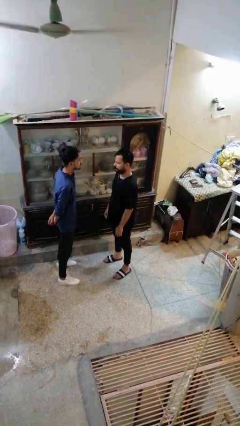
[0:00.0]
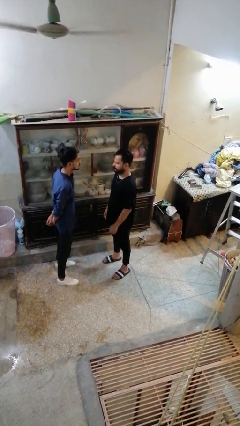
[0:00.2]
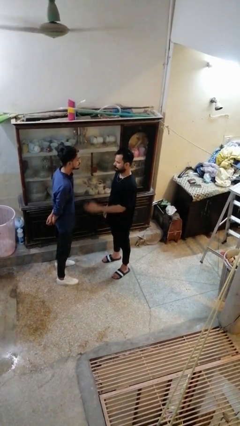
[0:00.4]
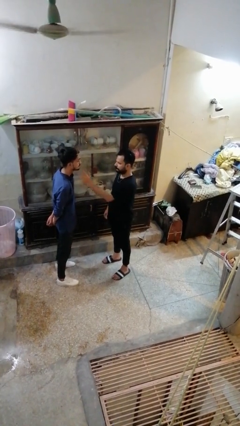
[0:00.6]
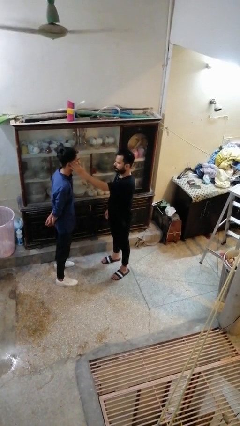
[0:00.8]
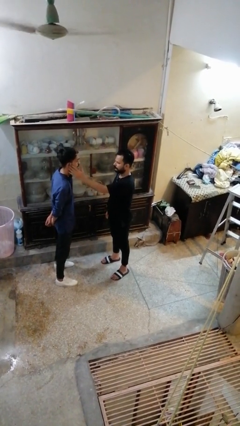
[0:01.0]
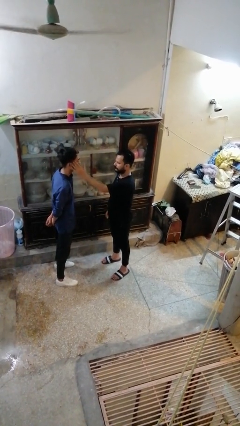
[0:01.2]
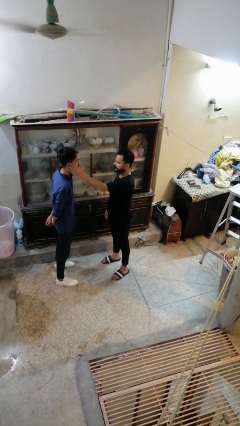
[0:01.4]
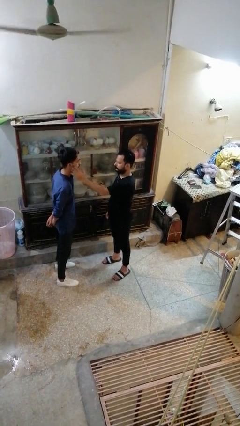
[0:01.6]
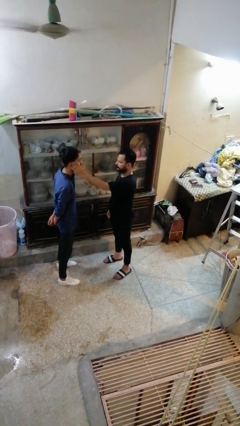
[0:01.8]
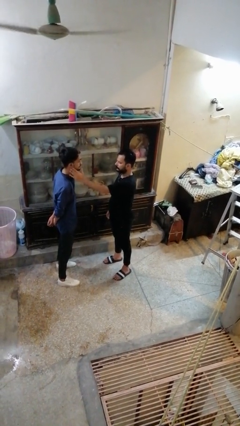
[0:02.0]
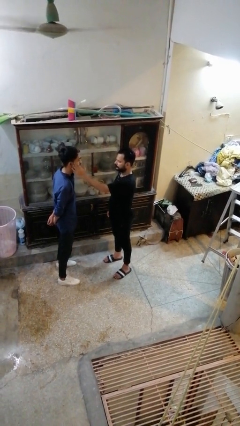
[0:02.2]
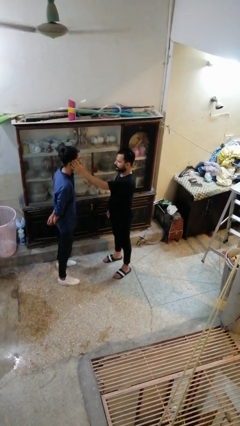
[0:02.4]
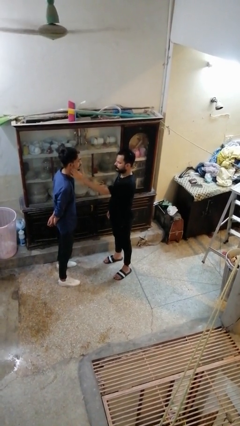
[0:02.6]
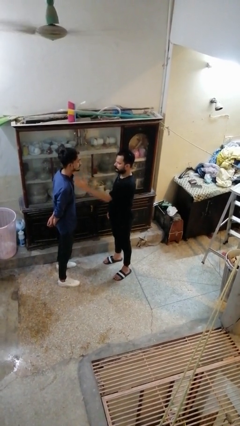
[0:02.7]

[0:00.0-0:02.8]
person touches face of person

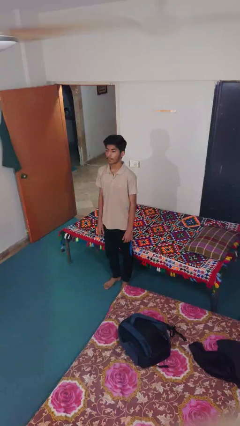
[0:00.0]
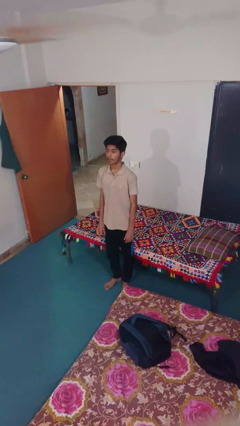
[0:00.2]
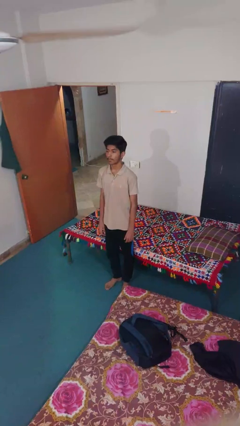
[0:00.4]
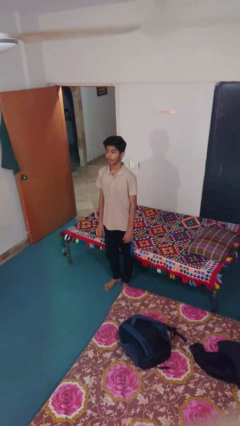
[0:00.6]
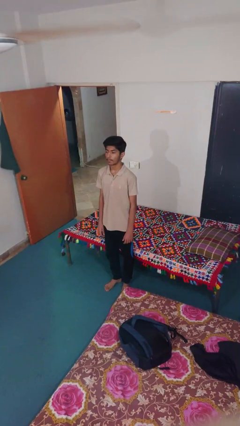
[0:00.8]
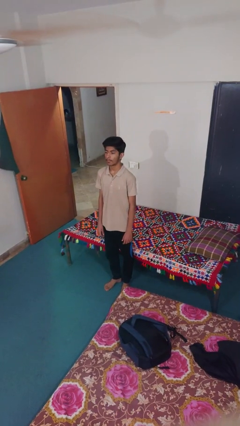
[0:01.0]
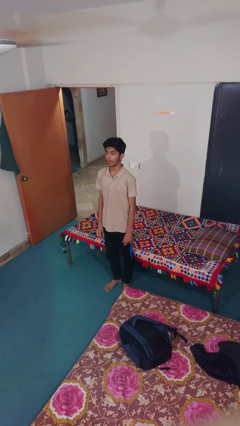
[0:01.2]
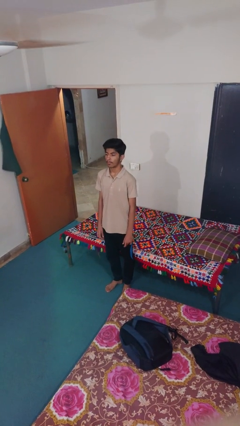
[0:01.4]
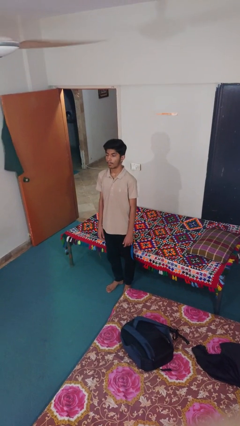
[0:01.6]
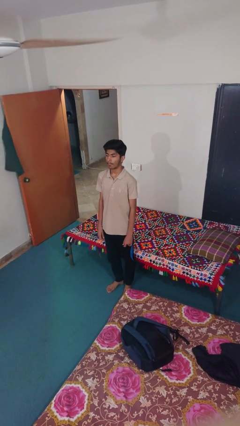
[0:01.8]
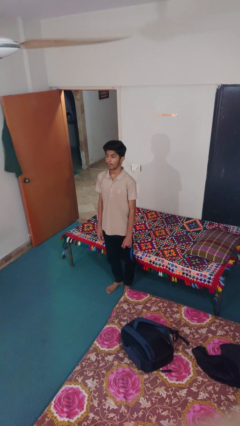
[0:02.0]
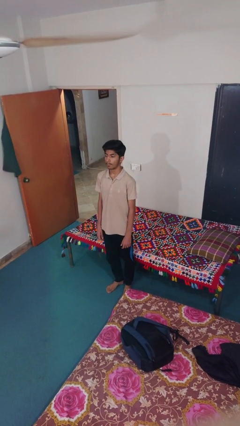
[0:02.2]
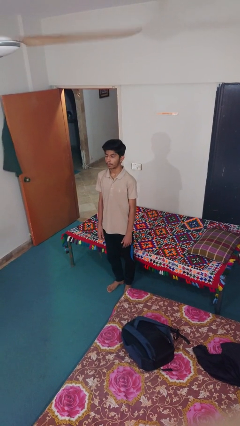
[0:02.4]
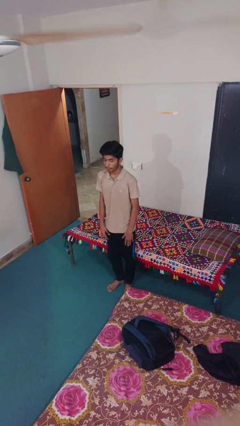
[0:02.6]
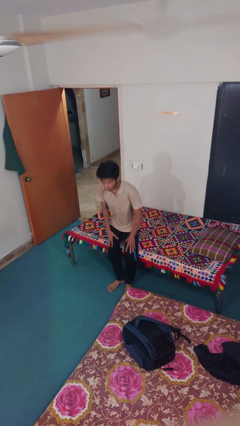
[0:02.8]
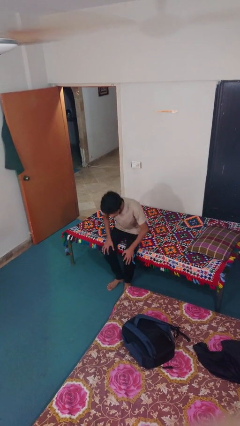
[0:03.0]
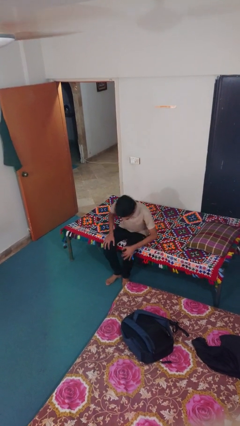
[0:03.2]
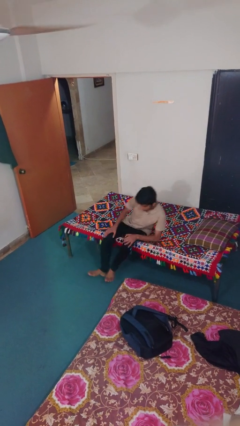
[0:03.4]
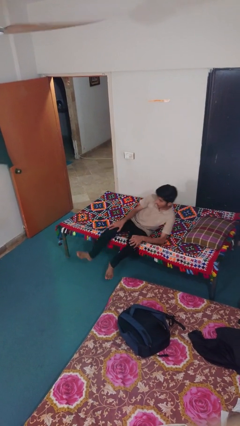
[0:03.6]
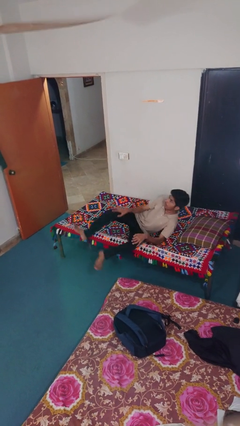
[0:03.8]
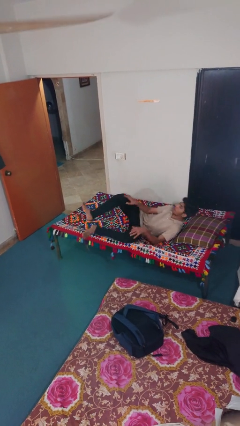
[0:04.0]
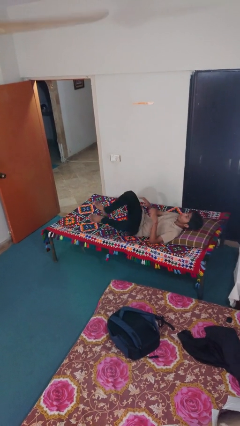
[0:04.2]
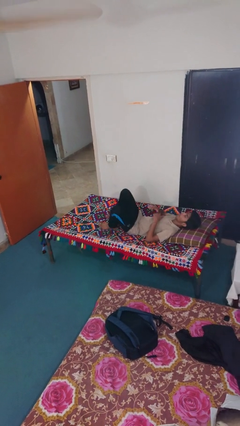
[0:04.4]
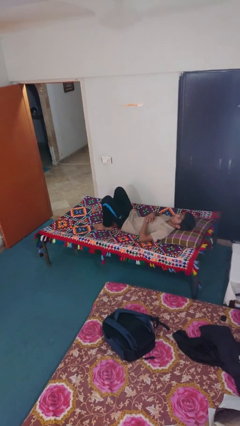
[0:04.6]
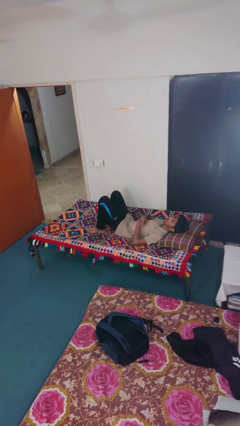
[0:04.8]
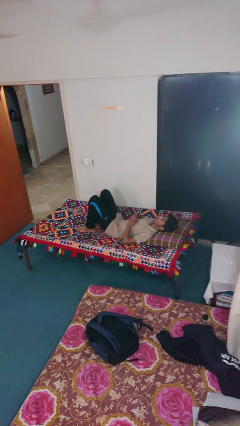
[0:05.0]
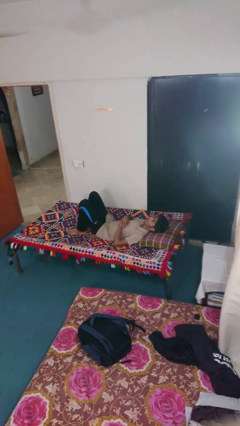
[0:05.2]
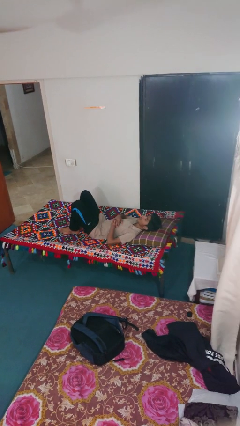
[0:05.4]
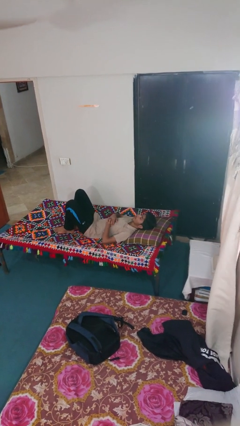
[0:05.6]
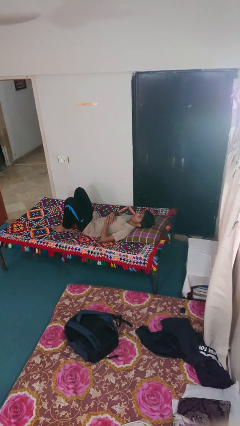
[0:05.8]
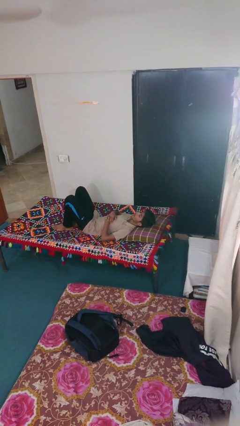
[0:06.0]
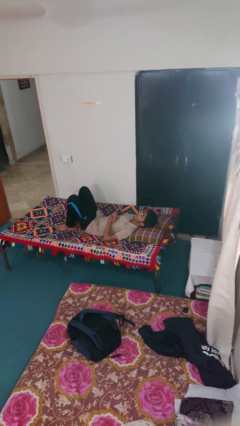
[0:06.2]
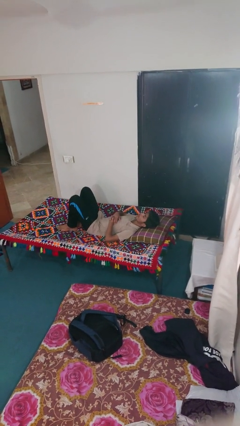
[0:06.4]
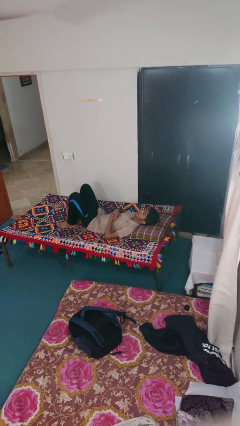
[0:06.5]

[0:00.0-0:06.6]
person lies down on bed

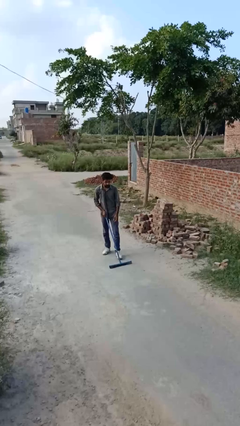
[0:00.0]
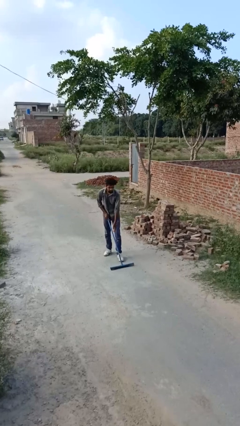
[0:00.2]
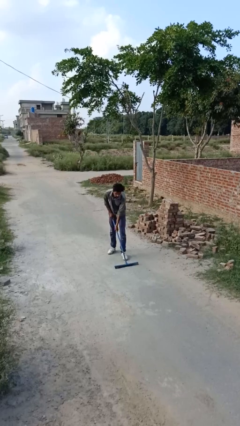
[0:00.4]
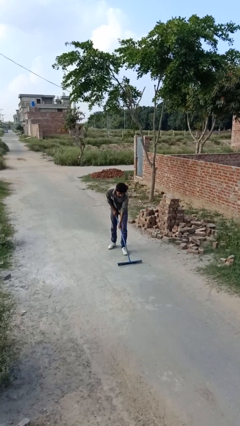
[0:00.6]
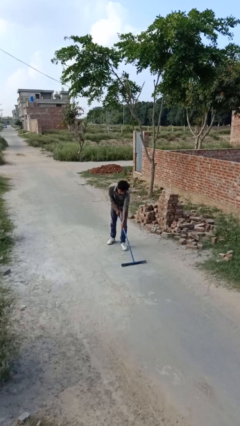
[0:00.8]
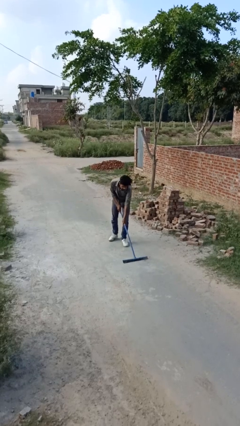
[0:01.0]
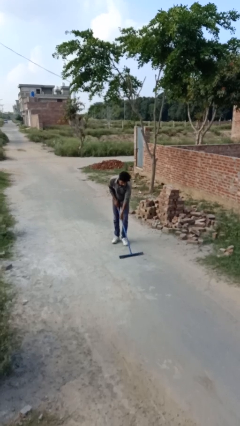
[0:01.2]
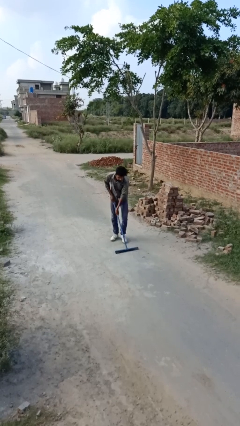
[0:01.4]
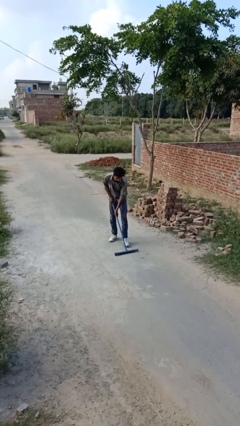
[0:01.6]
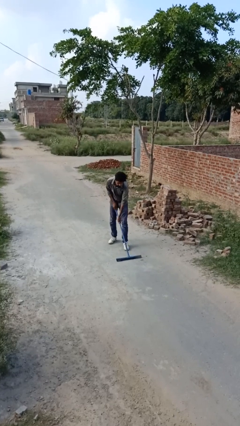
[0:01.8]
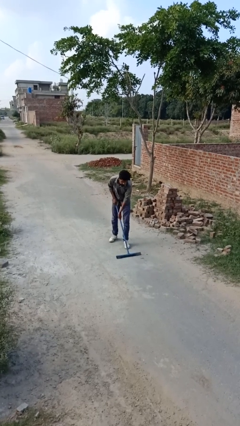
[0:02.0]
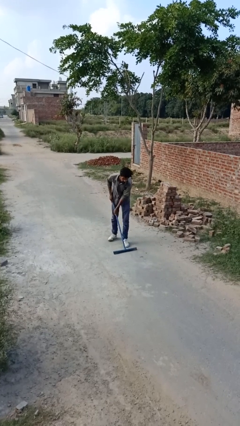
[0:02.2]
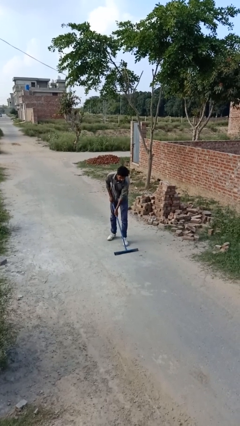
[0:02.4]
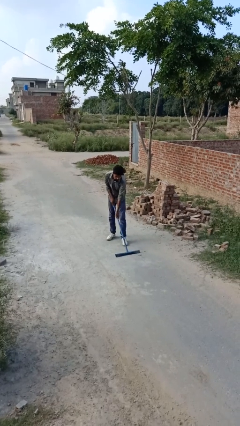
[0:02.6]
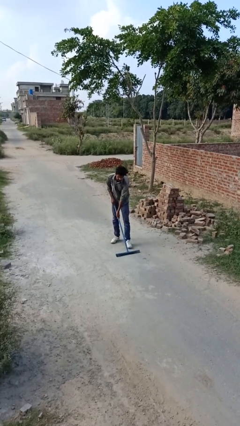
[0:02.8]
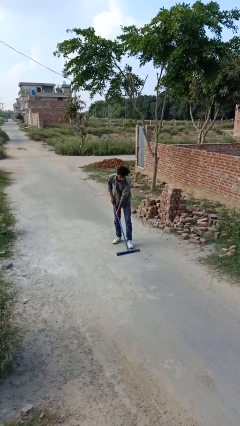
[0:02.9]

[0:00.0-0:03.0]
person sweeps floor

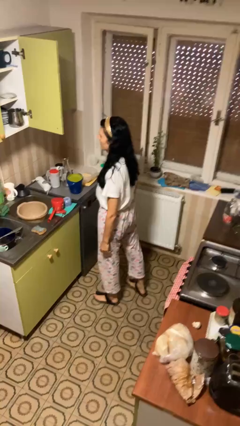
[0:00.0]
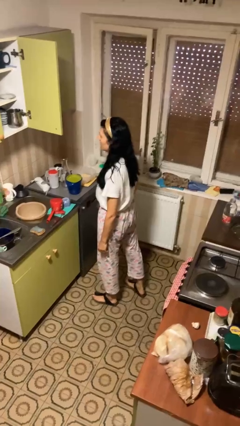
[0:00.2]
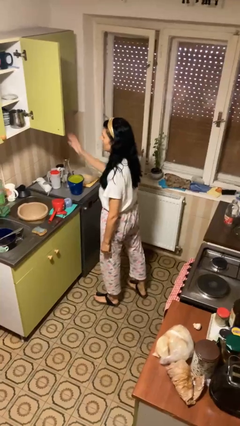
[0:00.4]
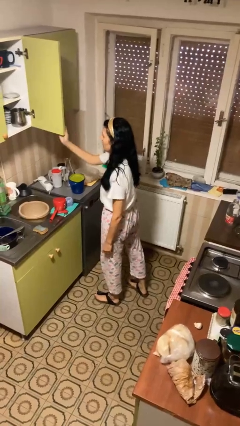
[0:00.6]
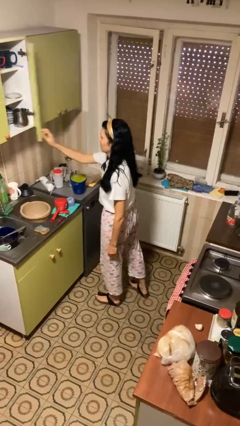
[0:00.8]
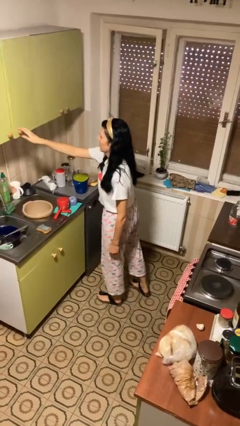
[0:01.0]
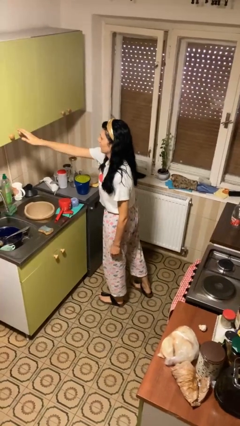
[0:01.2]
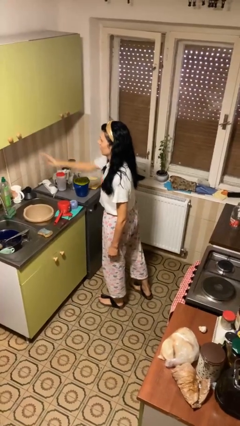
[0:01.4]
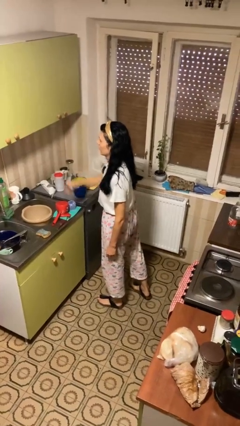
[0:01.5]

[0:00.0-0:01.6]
person closes cabinet

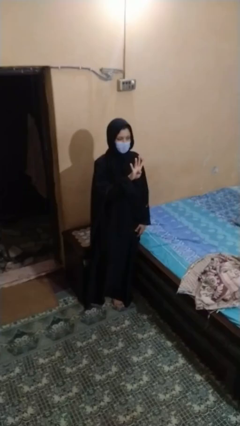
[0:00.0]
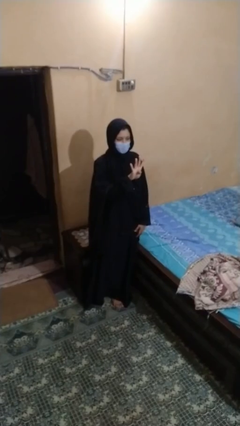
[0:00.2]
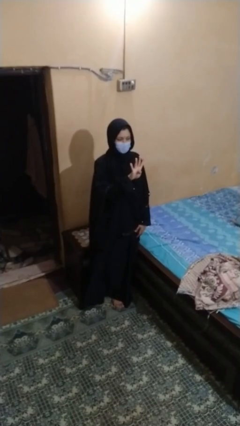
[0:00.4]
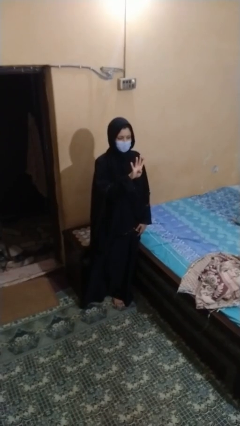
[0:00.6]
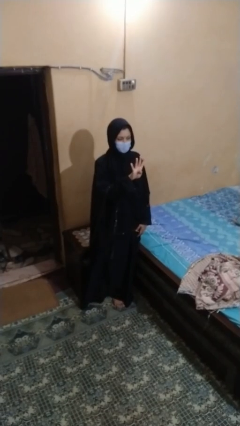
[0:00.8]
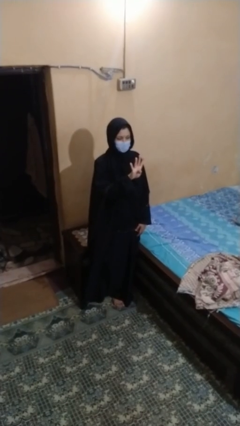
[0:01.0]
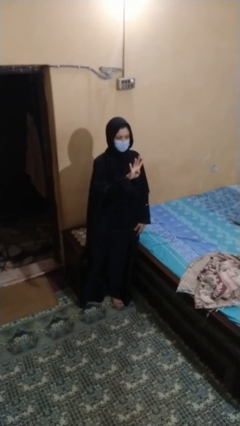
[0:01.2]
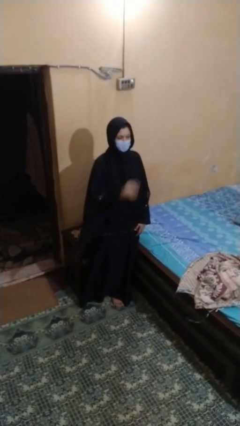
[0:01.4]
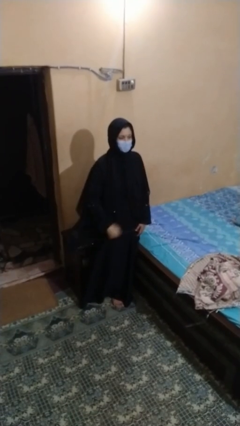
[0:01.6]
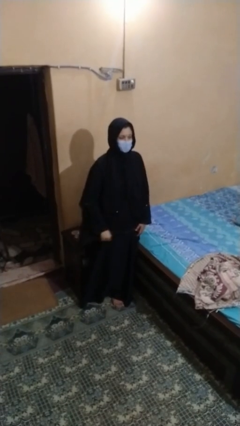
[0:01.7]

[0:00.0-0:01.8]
person gestures number four

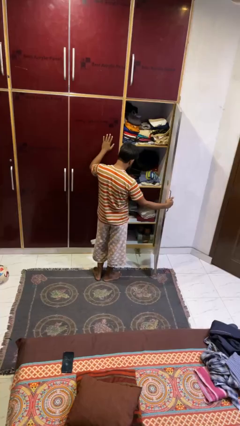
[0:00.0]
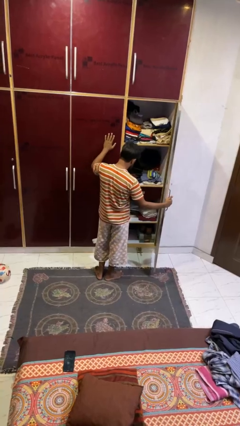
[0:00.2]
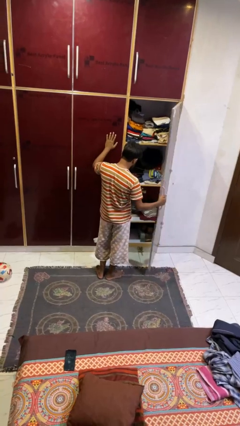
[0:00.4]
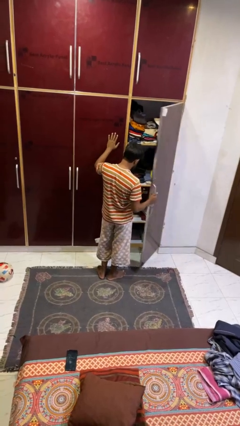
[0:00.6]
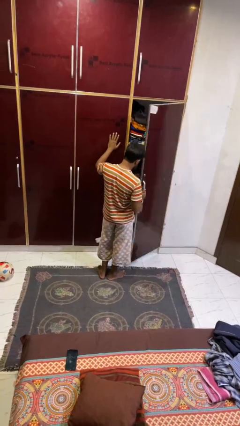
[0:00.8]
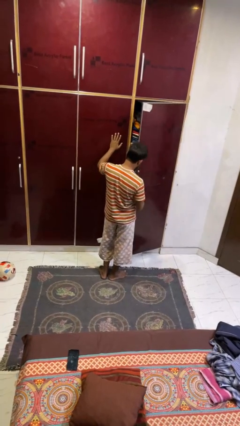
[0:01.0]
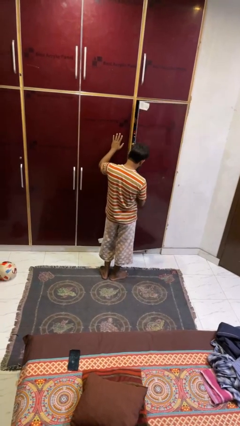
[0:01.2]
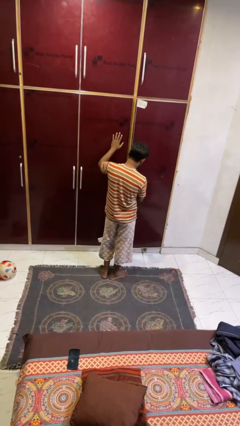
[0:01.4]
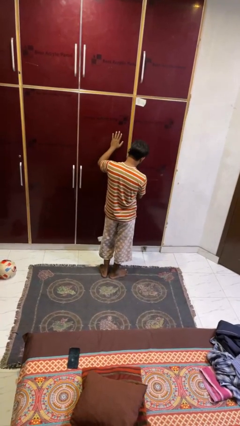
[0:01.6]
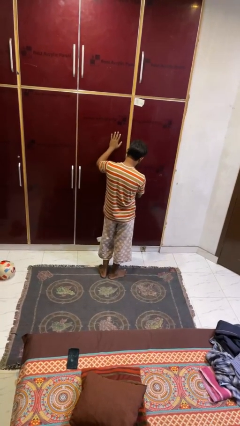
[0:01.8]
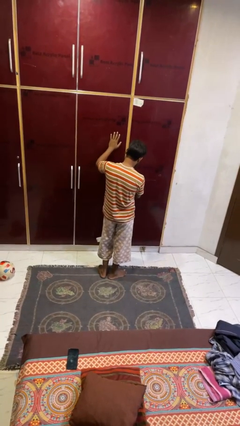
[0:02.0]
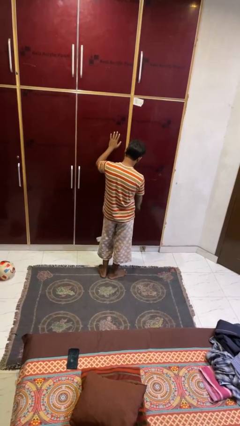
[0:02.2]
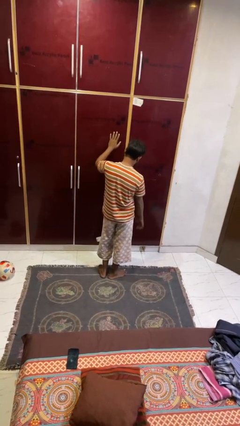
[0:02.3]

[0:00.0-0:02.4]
person closes closet door
